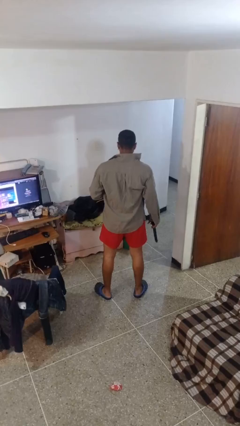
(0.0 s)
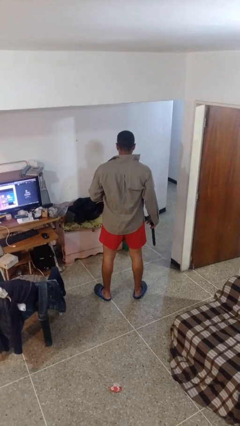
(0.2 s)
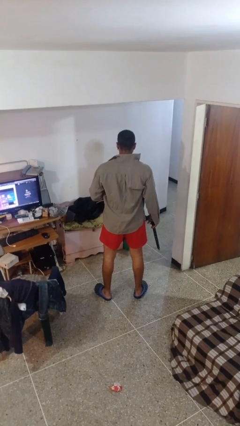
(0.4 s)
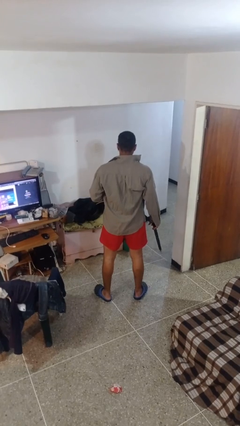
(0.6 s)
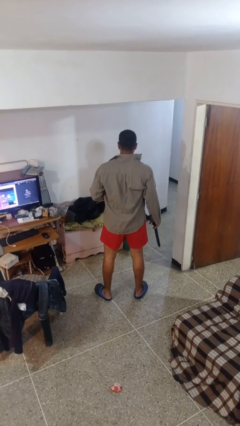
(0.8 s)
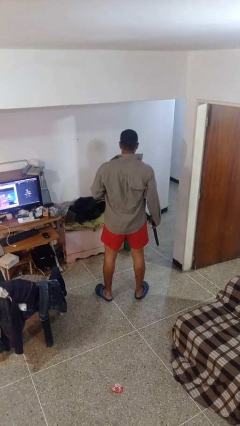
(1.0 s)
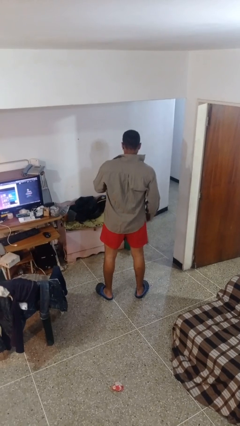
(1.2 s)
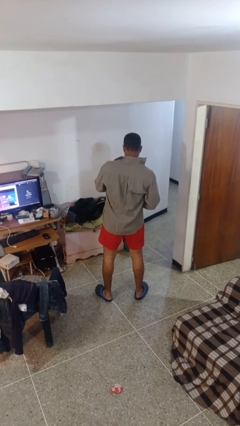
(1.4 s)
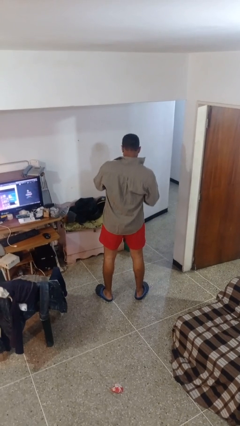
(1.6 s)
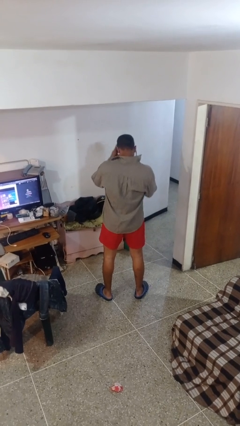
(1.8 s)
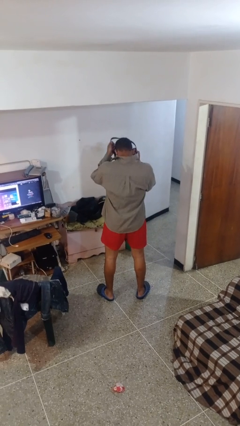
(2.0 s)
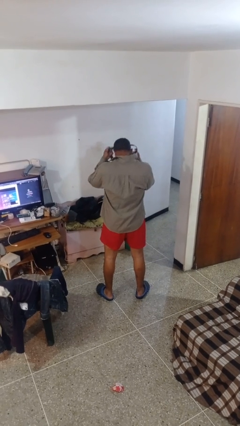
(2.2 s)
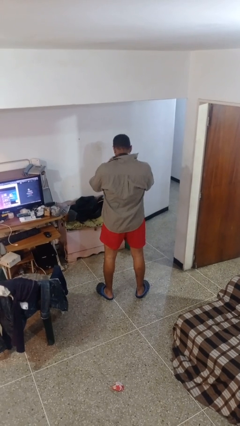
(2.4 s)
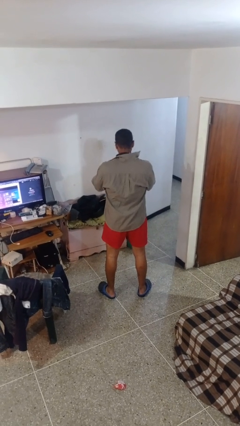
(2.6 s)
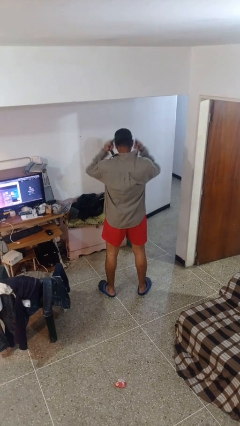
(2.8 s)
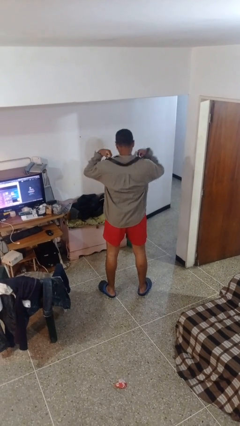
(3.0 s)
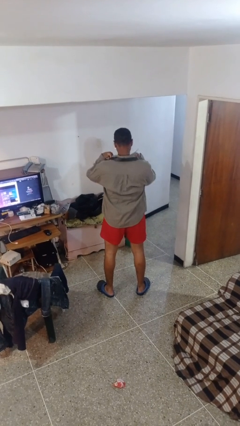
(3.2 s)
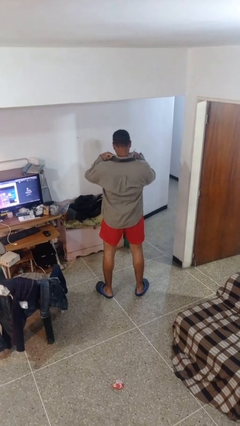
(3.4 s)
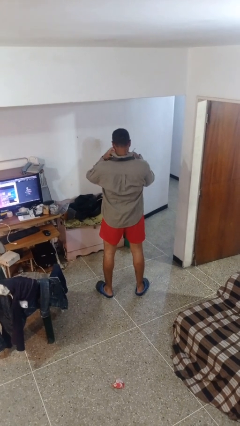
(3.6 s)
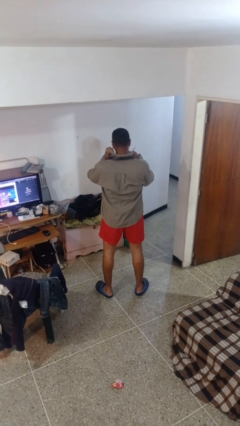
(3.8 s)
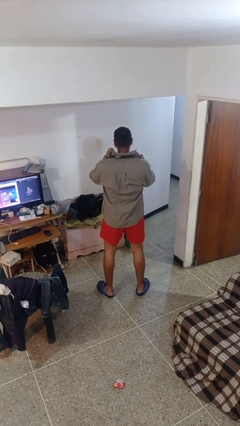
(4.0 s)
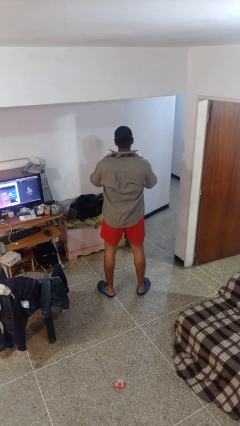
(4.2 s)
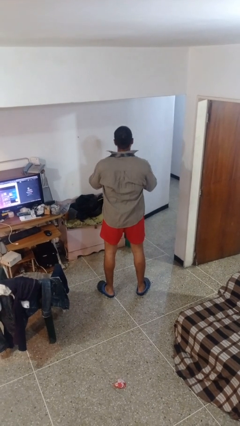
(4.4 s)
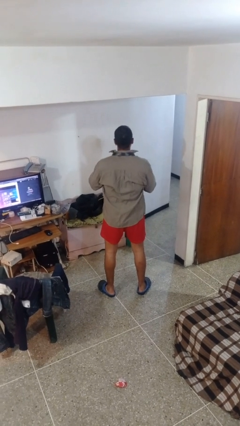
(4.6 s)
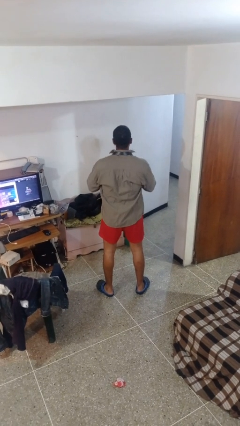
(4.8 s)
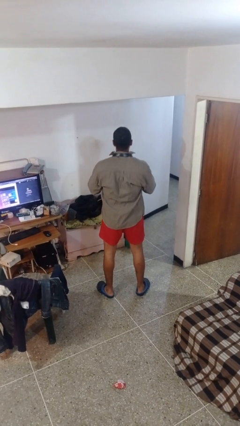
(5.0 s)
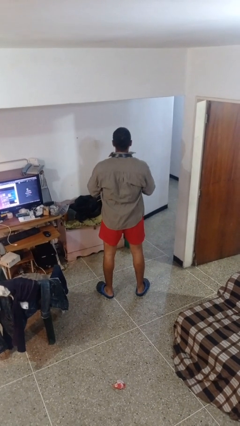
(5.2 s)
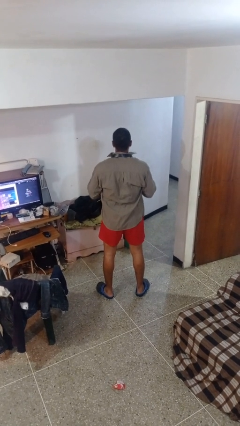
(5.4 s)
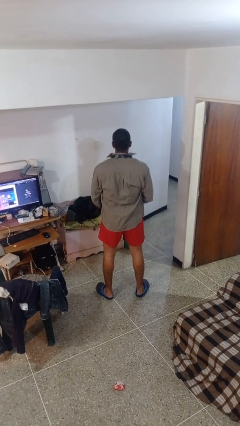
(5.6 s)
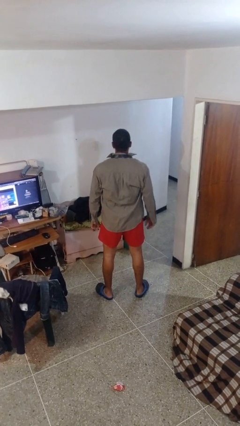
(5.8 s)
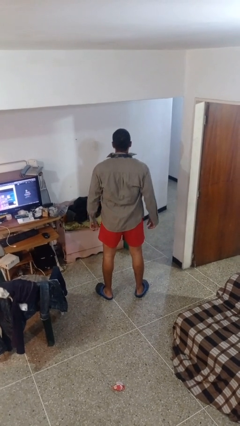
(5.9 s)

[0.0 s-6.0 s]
person puts on necktie

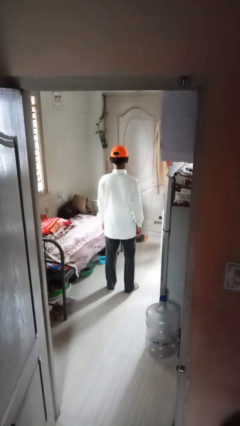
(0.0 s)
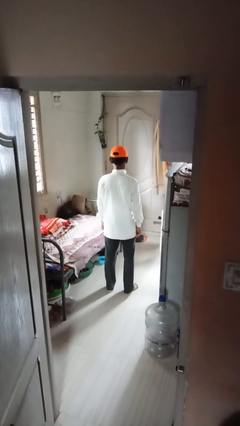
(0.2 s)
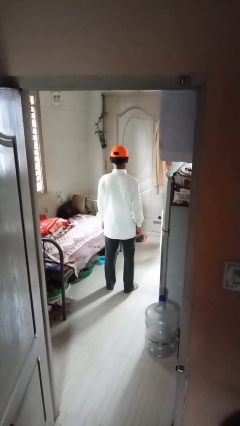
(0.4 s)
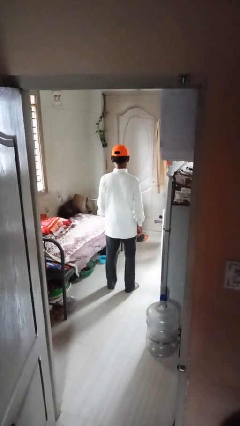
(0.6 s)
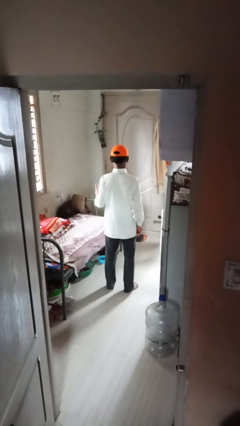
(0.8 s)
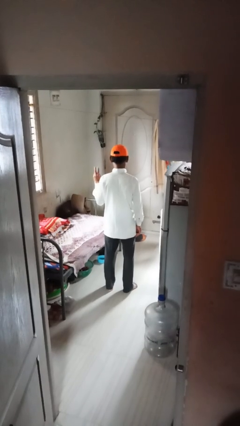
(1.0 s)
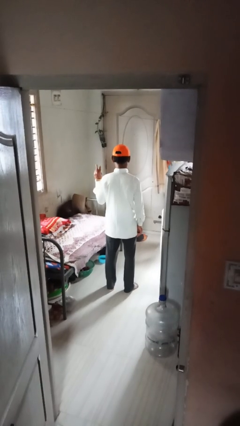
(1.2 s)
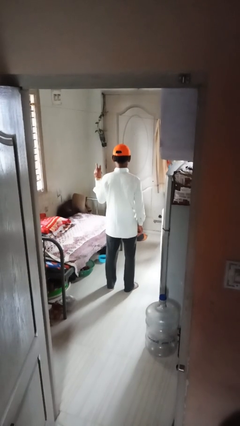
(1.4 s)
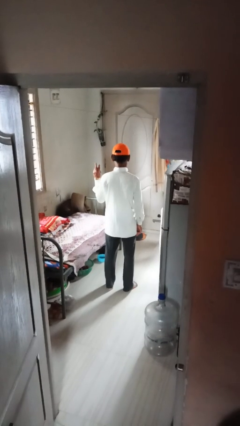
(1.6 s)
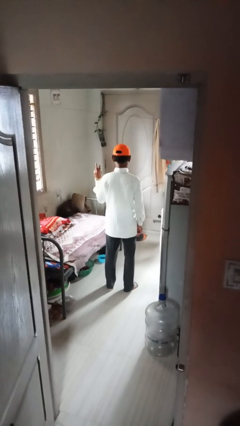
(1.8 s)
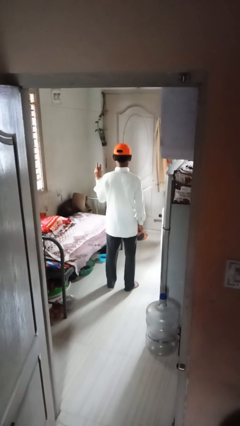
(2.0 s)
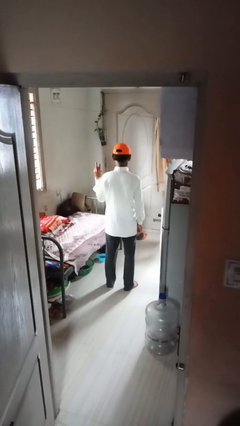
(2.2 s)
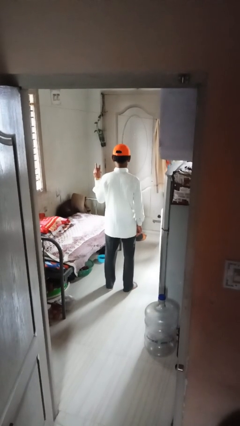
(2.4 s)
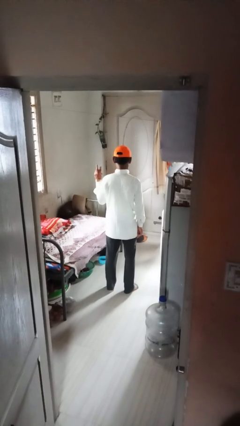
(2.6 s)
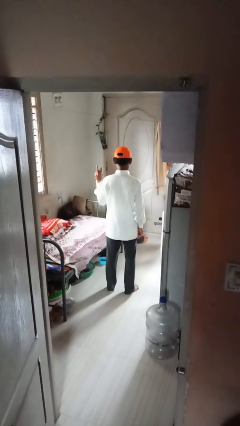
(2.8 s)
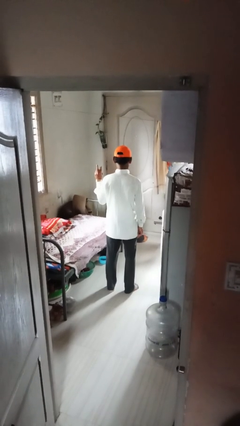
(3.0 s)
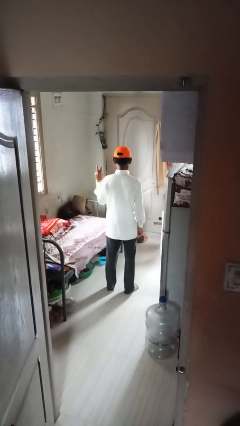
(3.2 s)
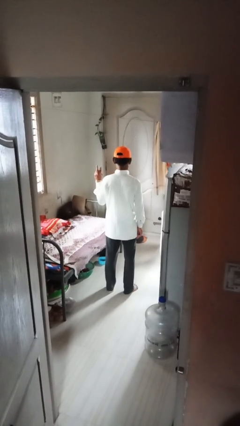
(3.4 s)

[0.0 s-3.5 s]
person gestures peace

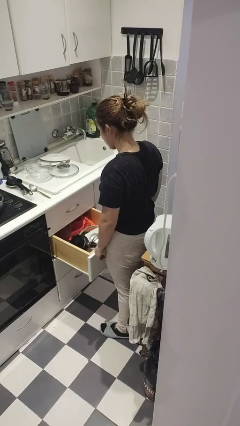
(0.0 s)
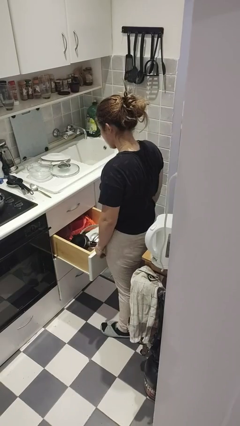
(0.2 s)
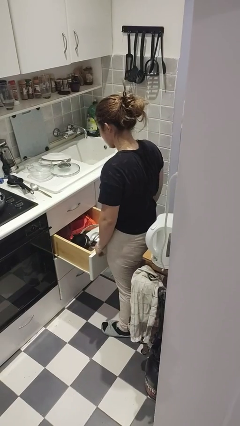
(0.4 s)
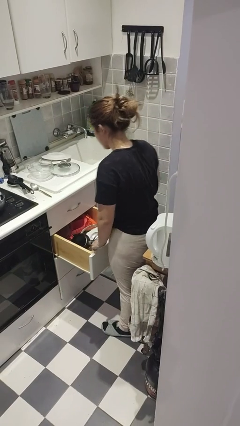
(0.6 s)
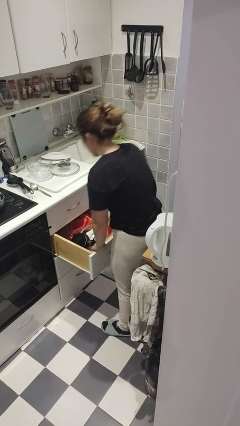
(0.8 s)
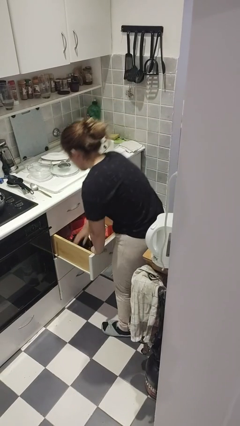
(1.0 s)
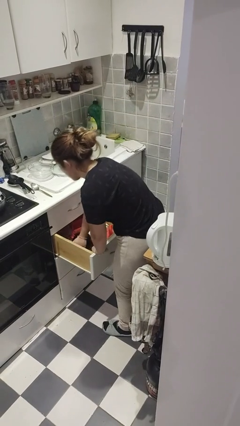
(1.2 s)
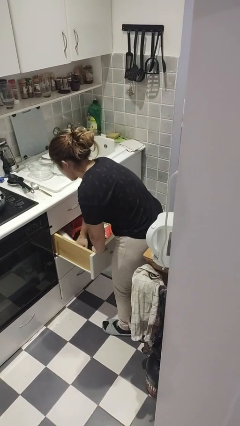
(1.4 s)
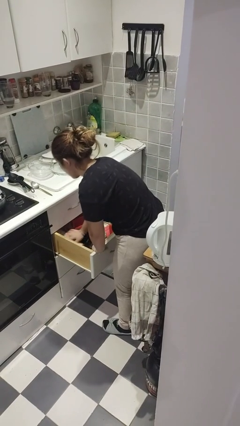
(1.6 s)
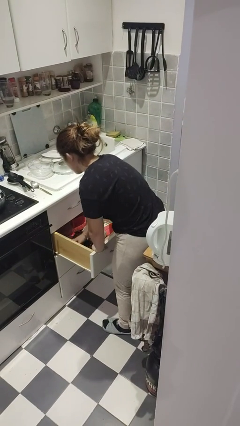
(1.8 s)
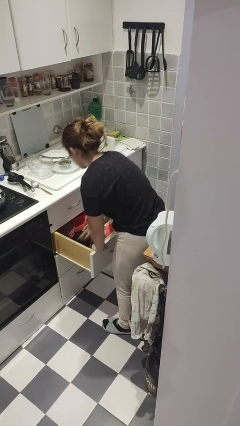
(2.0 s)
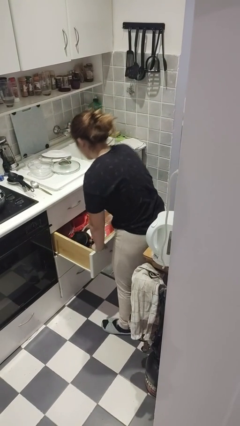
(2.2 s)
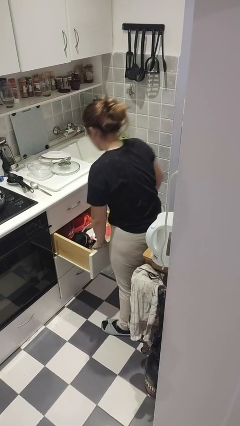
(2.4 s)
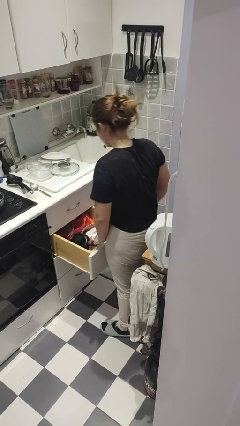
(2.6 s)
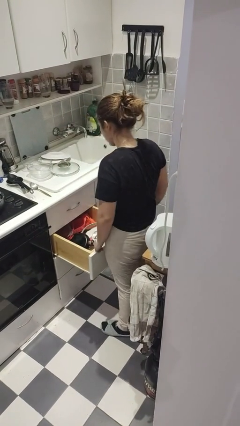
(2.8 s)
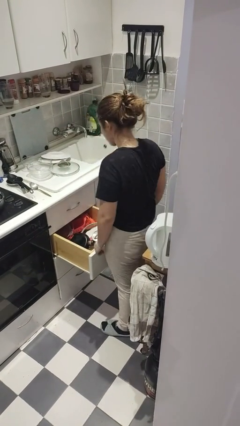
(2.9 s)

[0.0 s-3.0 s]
person searches in kitchen drawer

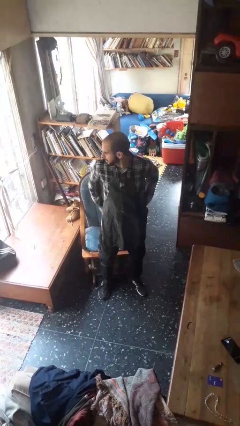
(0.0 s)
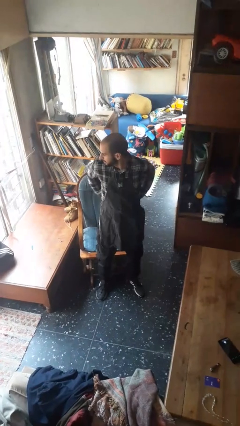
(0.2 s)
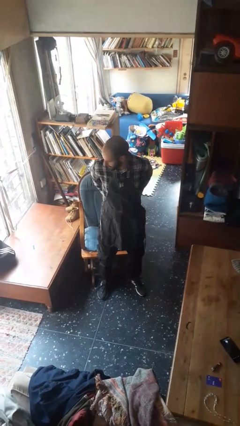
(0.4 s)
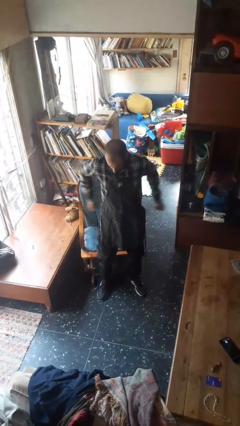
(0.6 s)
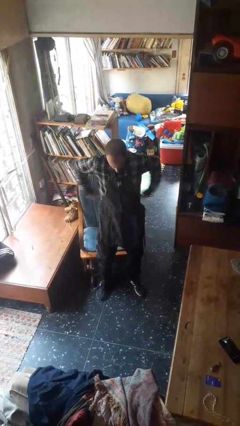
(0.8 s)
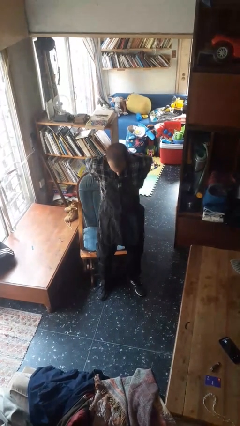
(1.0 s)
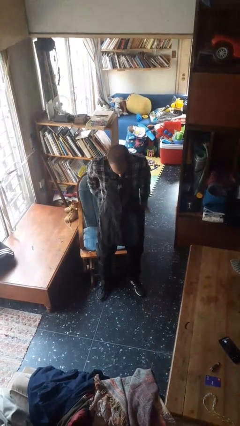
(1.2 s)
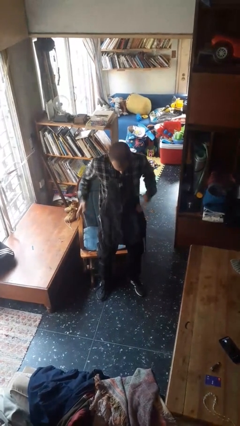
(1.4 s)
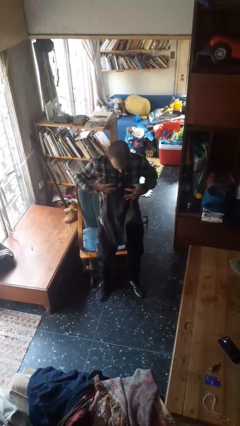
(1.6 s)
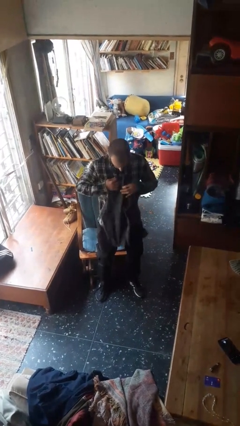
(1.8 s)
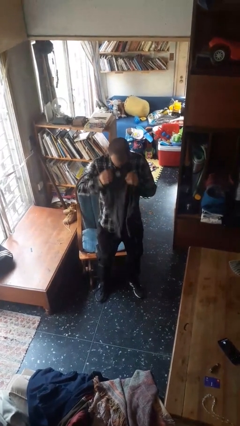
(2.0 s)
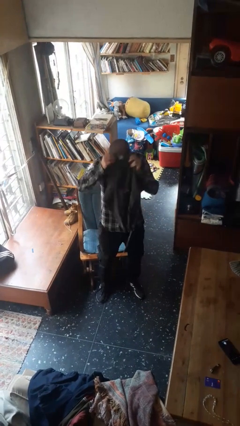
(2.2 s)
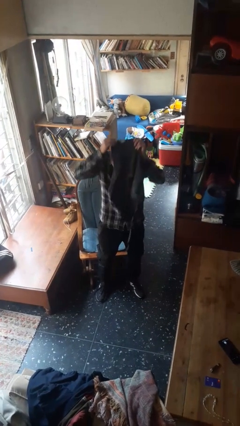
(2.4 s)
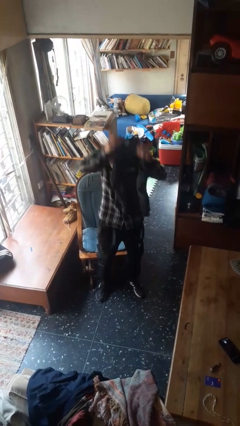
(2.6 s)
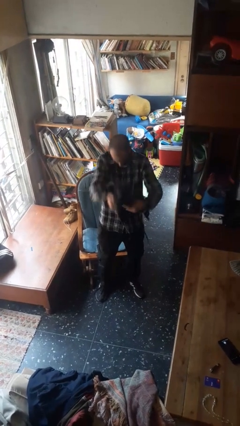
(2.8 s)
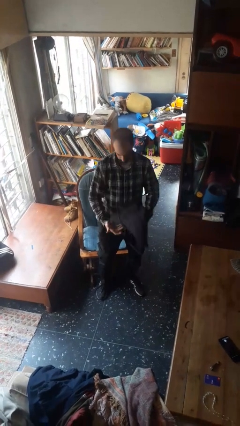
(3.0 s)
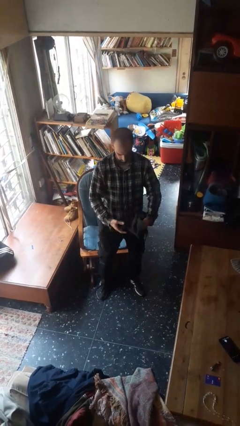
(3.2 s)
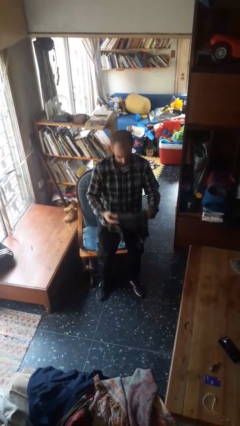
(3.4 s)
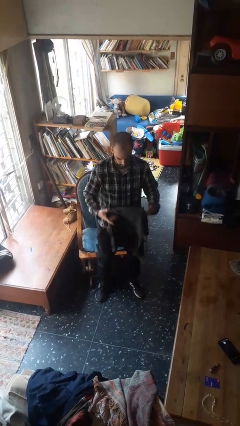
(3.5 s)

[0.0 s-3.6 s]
person takes off apron

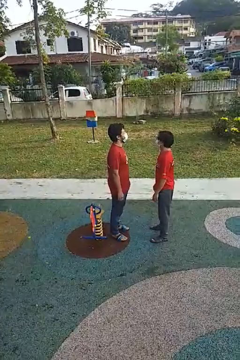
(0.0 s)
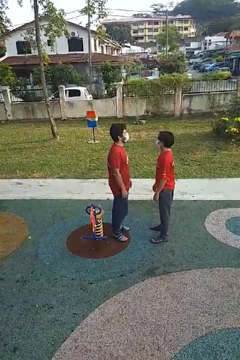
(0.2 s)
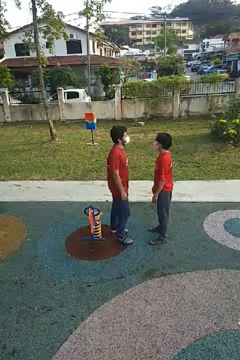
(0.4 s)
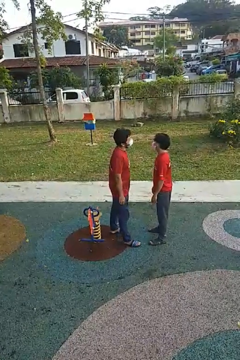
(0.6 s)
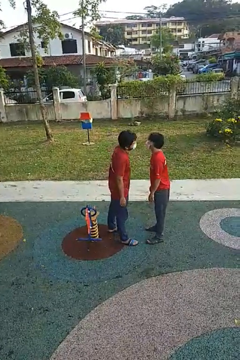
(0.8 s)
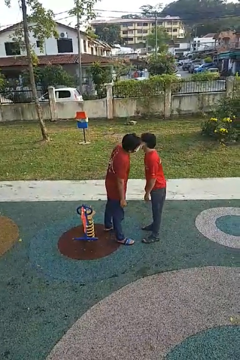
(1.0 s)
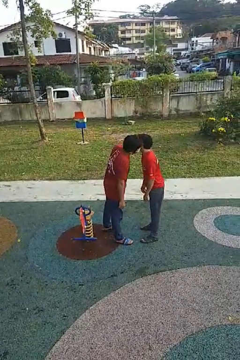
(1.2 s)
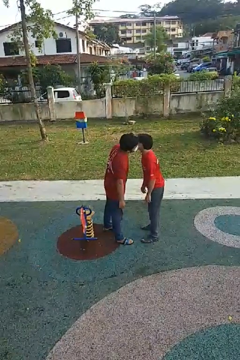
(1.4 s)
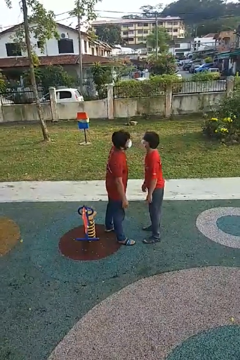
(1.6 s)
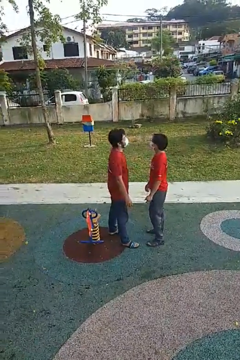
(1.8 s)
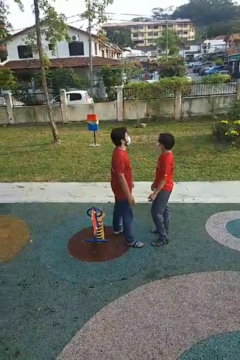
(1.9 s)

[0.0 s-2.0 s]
person kisses cheek of person
